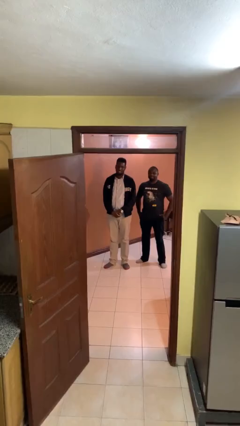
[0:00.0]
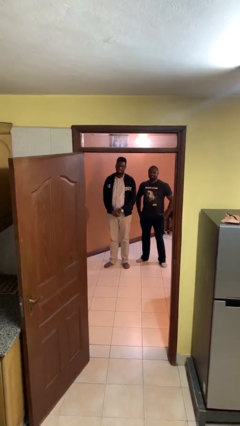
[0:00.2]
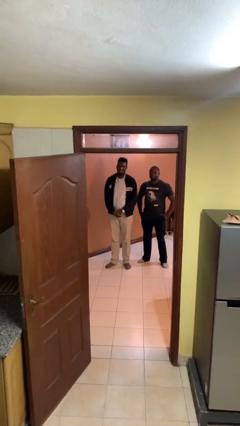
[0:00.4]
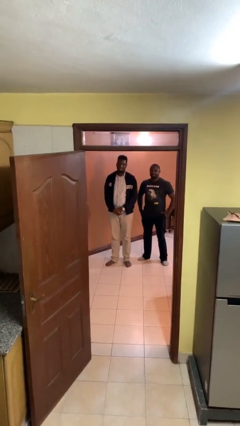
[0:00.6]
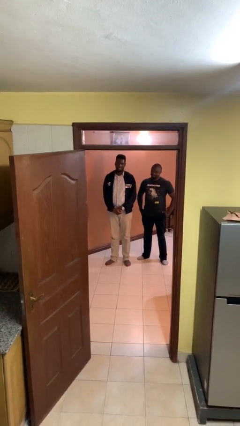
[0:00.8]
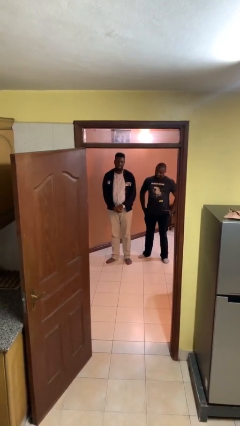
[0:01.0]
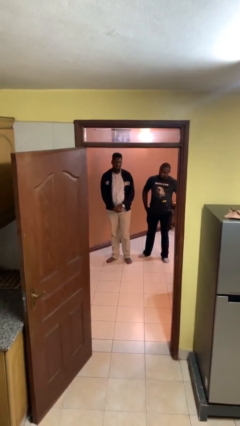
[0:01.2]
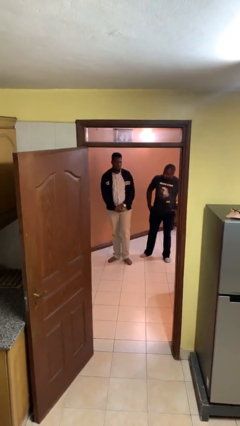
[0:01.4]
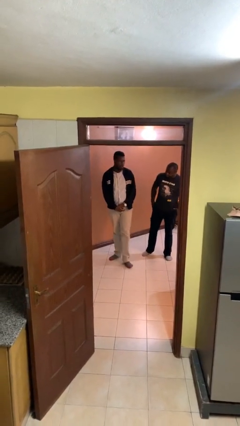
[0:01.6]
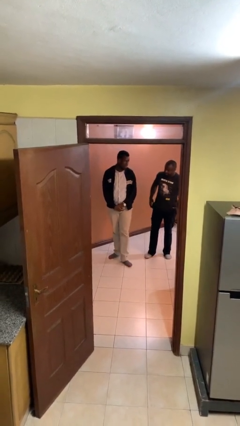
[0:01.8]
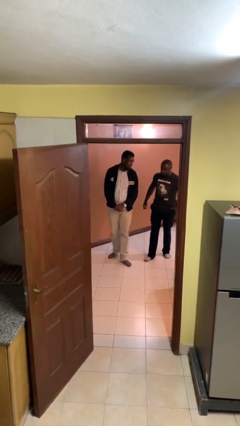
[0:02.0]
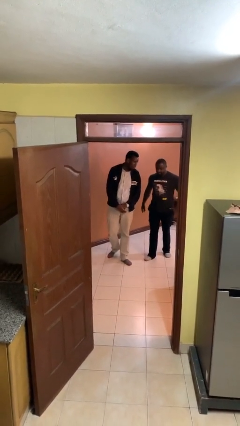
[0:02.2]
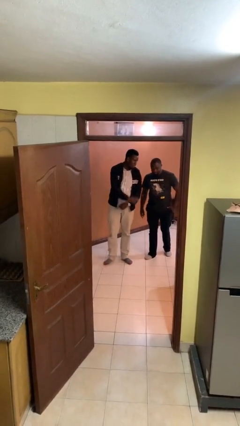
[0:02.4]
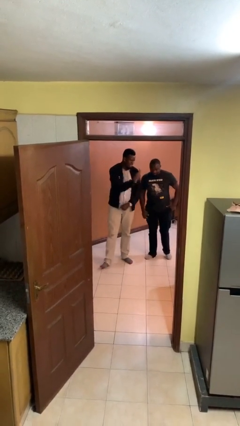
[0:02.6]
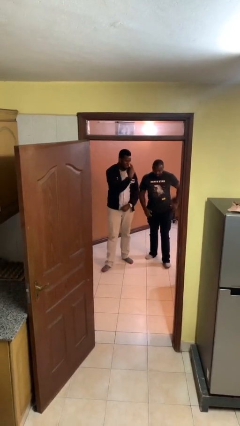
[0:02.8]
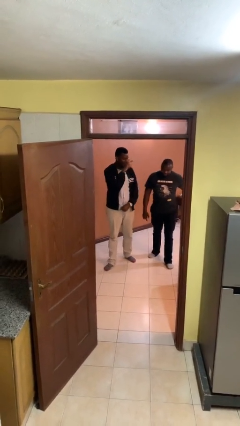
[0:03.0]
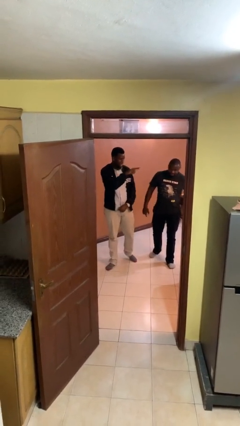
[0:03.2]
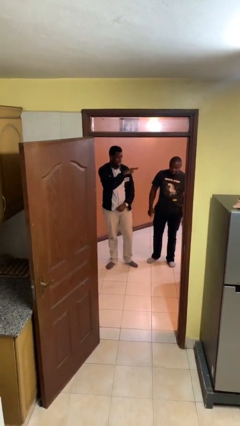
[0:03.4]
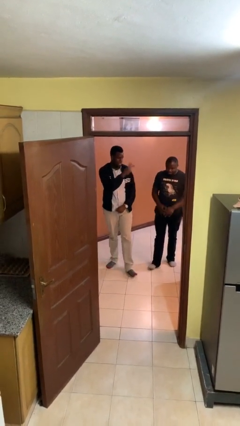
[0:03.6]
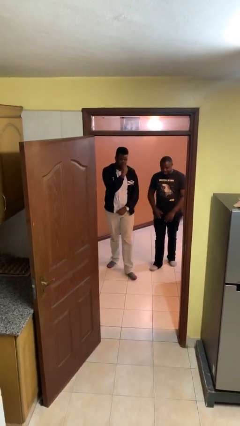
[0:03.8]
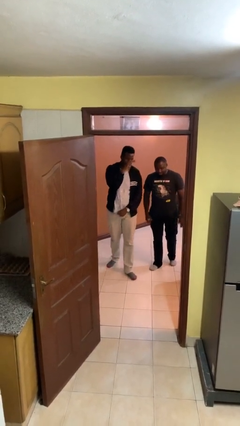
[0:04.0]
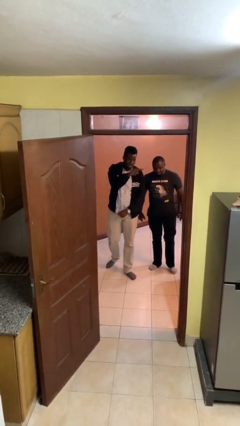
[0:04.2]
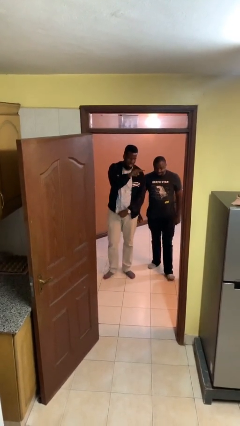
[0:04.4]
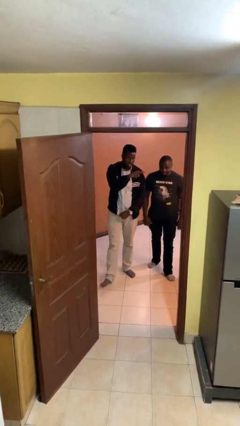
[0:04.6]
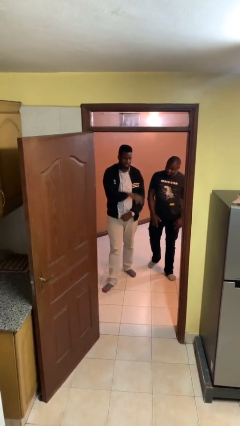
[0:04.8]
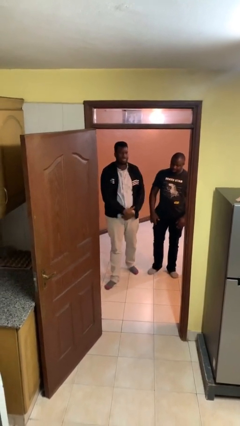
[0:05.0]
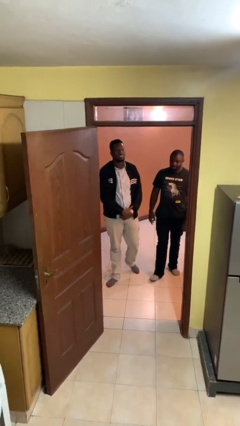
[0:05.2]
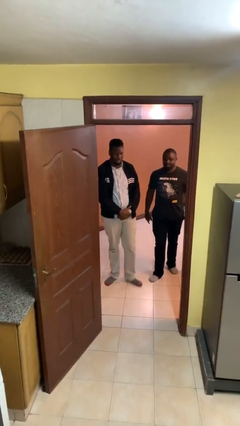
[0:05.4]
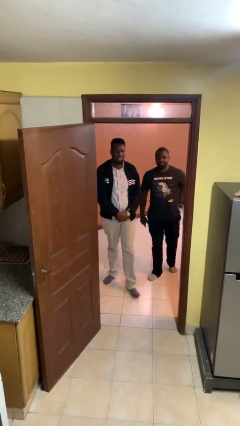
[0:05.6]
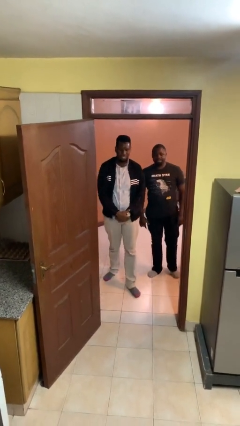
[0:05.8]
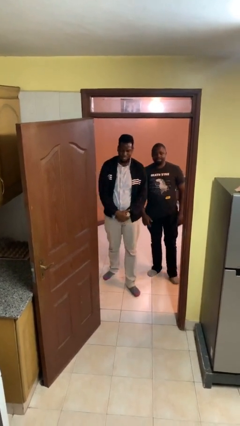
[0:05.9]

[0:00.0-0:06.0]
person talks to person

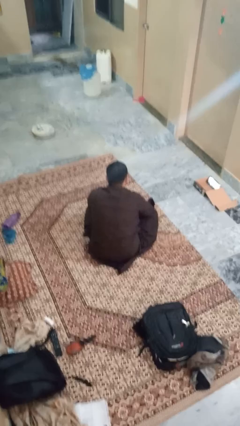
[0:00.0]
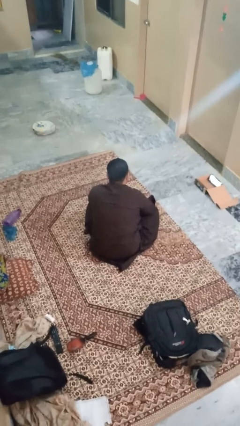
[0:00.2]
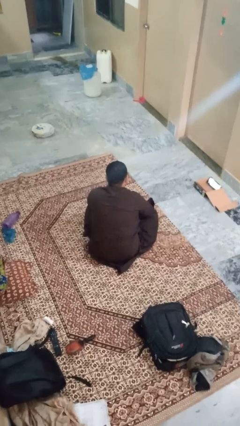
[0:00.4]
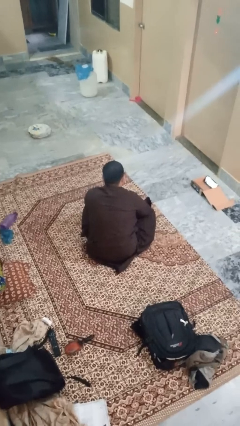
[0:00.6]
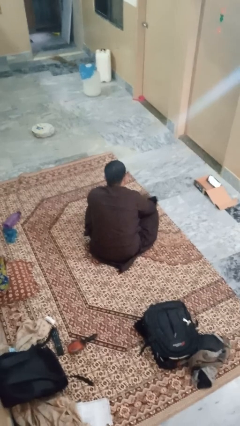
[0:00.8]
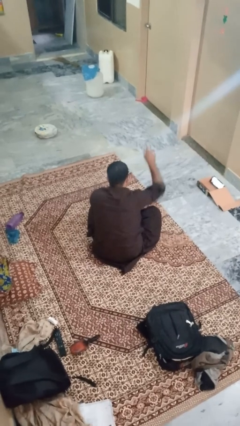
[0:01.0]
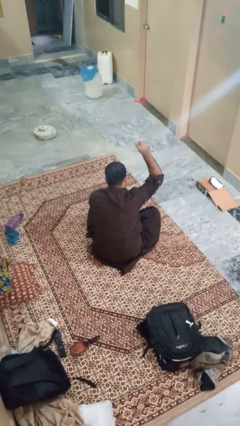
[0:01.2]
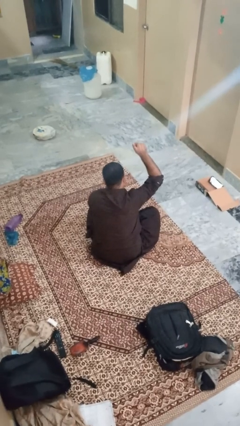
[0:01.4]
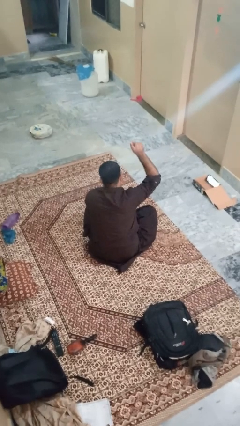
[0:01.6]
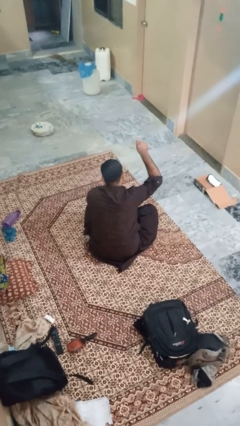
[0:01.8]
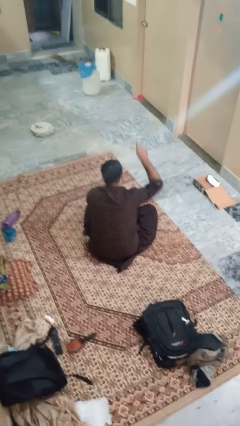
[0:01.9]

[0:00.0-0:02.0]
person gestures number one

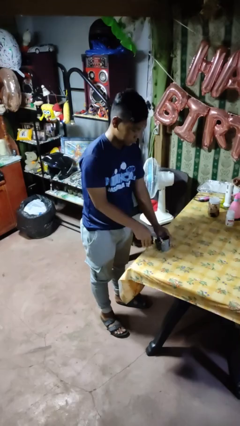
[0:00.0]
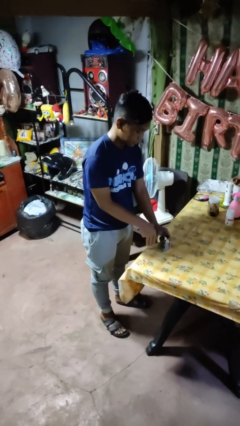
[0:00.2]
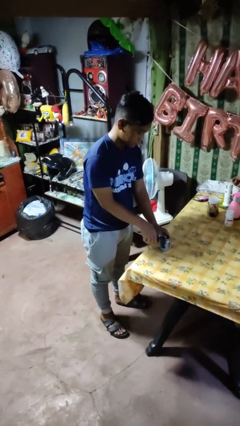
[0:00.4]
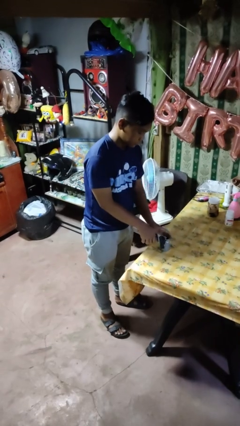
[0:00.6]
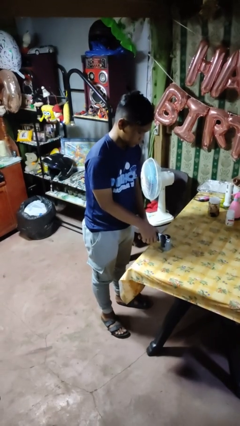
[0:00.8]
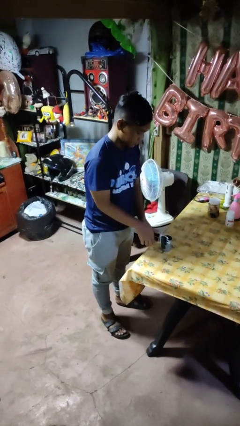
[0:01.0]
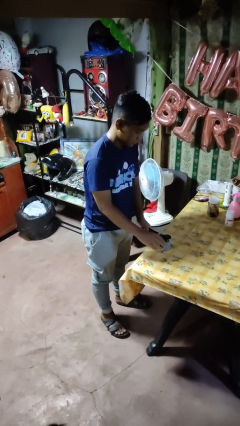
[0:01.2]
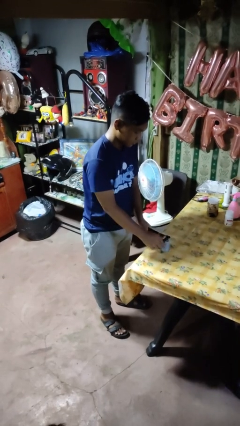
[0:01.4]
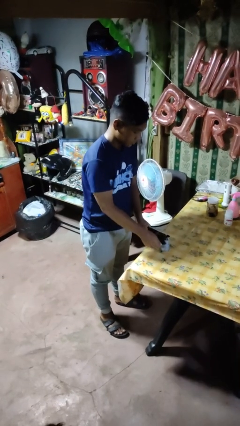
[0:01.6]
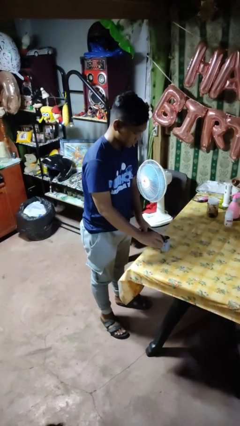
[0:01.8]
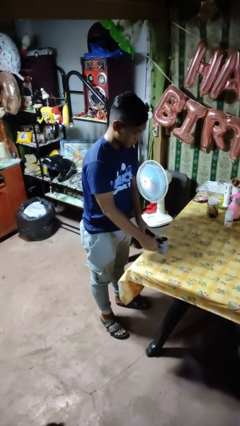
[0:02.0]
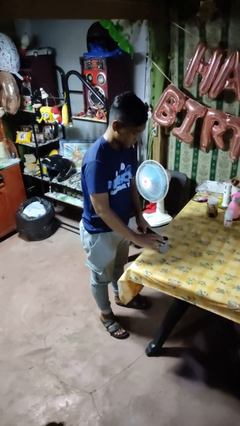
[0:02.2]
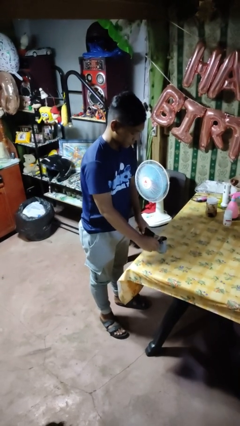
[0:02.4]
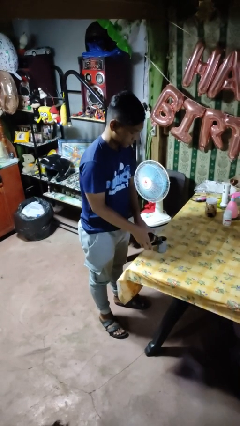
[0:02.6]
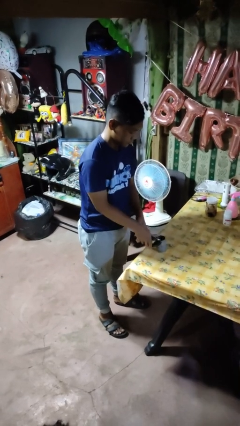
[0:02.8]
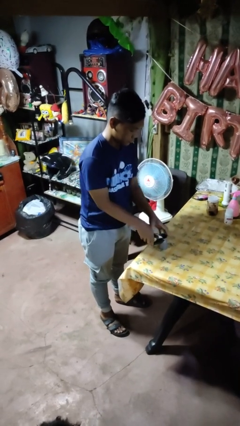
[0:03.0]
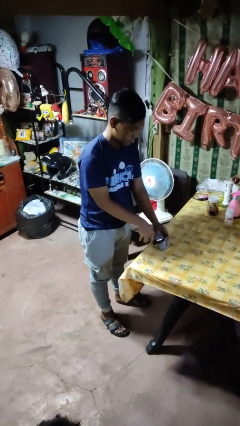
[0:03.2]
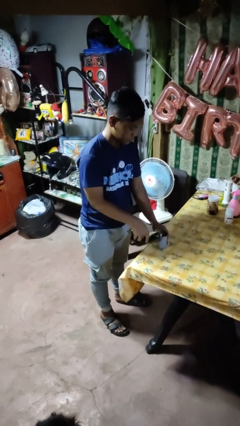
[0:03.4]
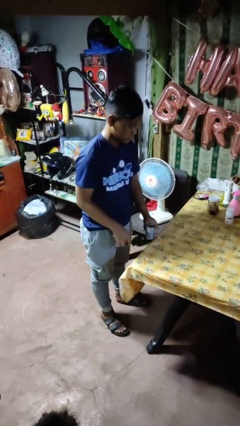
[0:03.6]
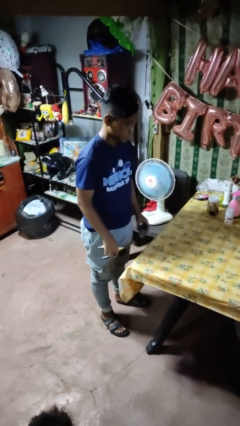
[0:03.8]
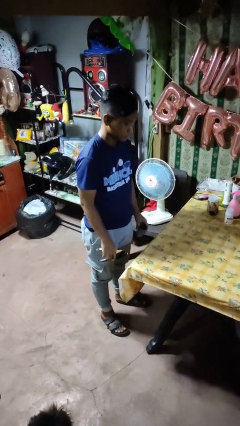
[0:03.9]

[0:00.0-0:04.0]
person opens can with can opener

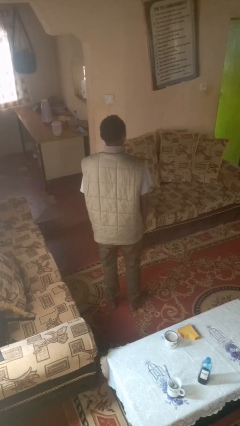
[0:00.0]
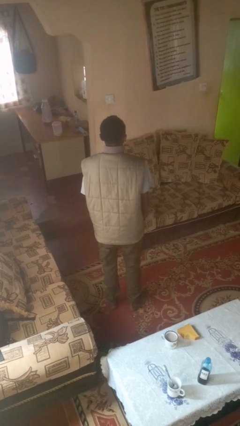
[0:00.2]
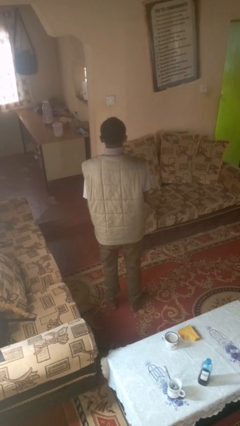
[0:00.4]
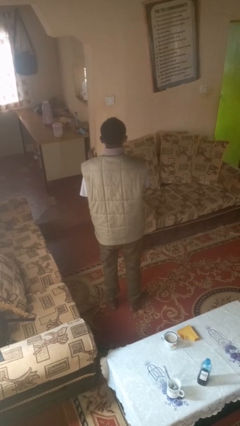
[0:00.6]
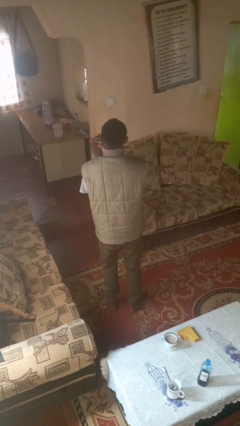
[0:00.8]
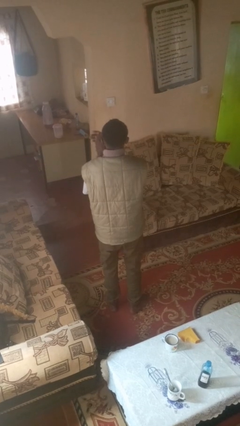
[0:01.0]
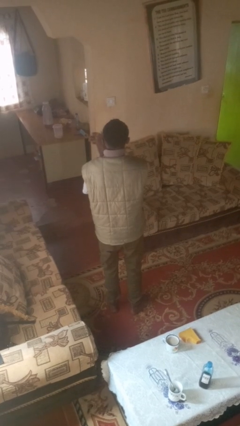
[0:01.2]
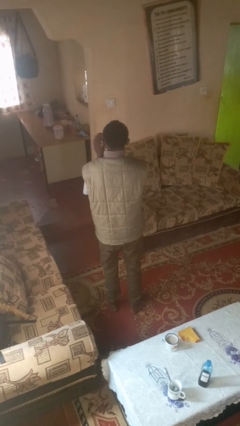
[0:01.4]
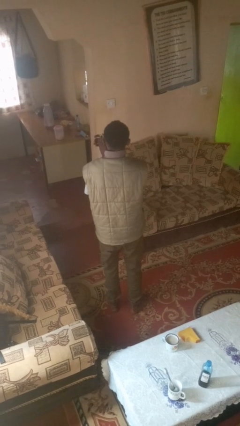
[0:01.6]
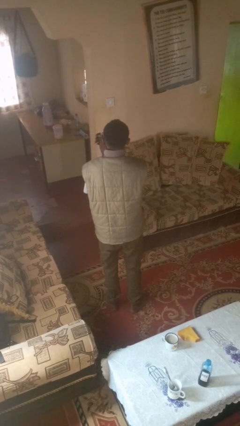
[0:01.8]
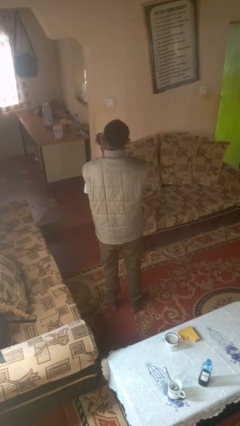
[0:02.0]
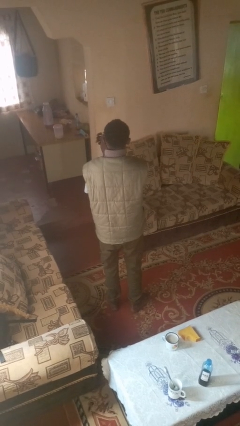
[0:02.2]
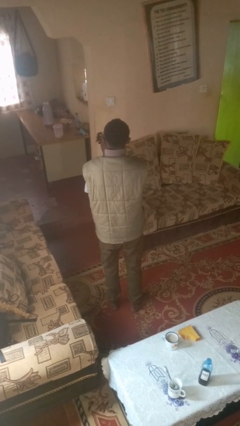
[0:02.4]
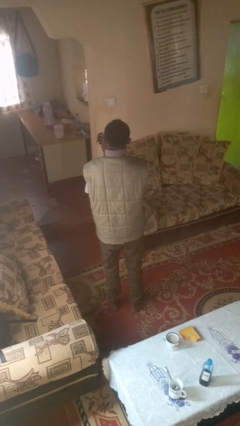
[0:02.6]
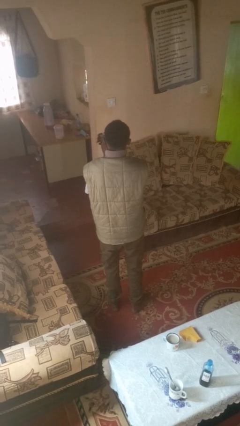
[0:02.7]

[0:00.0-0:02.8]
person claps hands

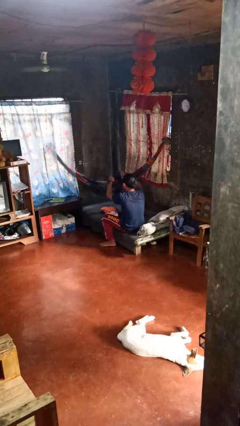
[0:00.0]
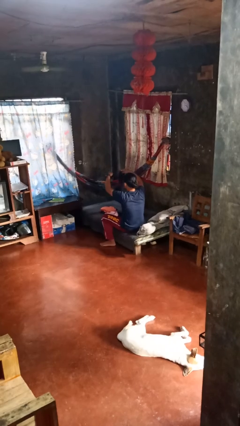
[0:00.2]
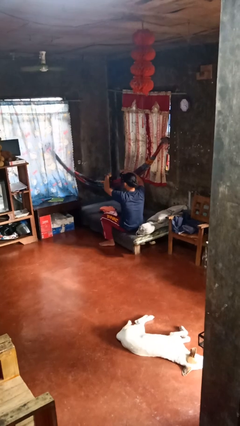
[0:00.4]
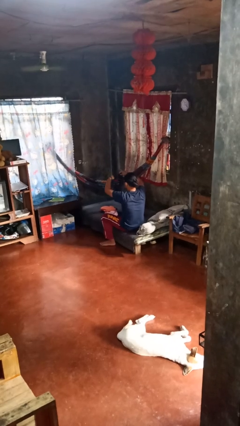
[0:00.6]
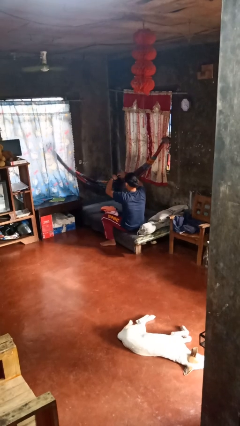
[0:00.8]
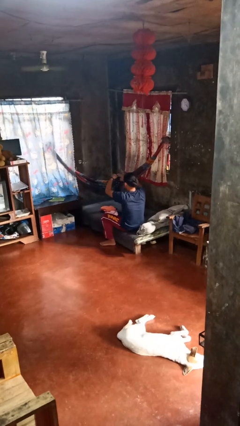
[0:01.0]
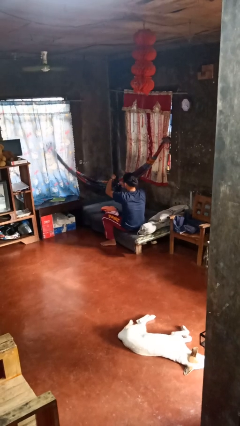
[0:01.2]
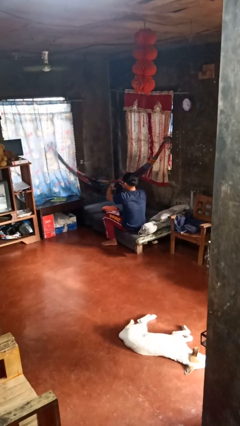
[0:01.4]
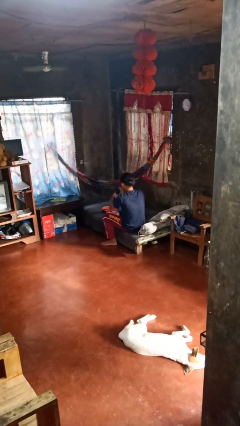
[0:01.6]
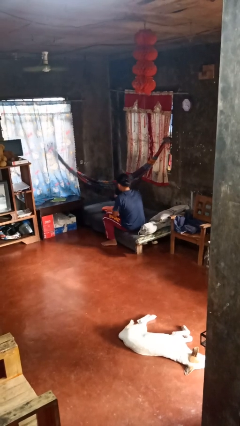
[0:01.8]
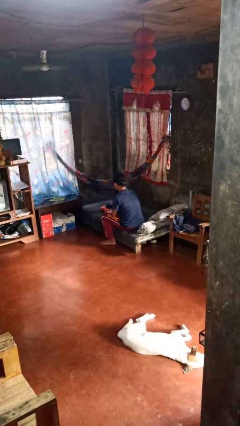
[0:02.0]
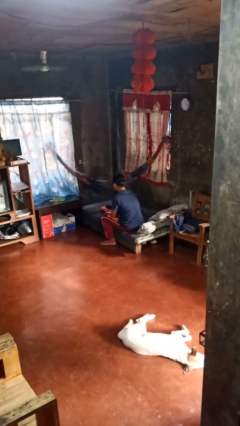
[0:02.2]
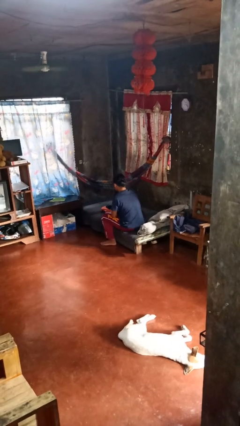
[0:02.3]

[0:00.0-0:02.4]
person folds socks

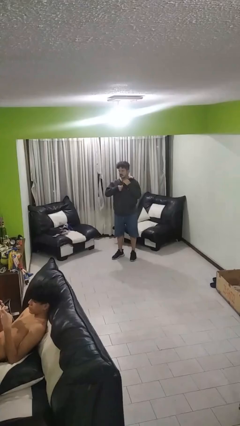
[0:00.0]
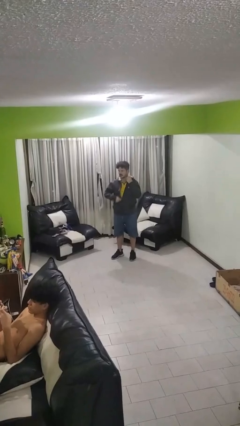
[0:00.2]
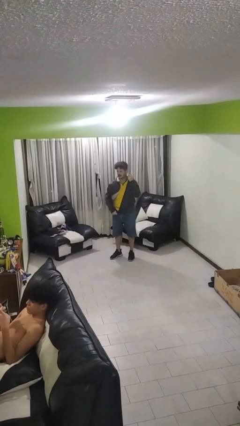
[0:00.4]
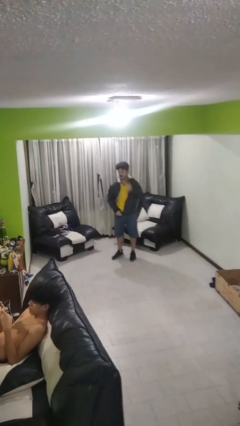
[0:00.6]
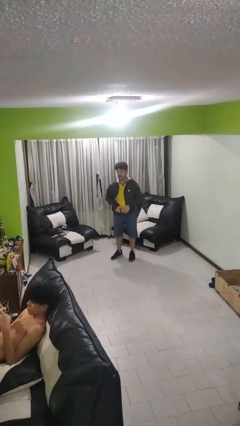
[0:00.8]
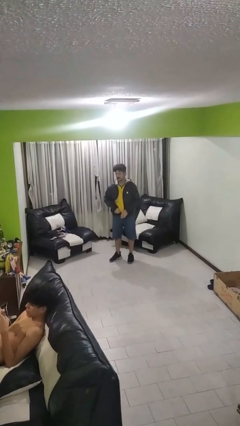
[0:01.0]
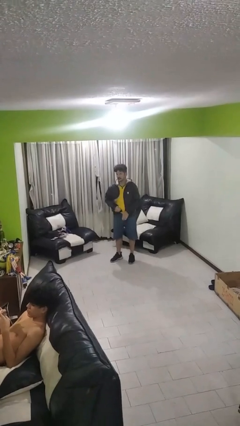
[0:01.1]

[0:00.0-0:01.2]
person unzips jacket
